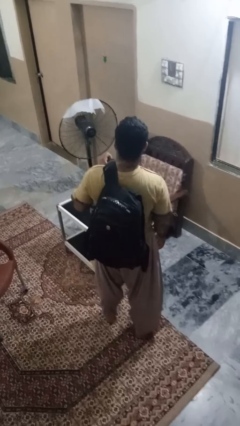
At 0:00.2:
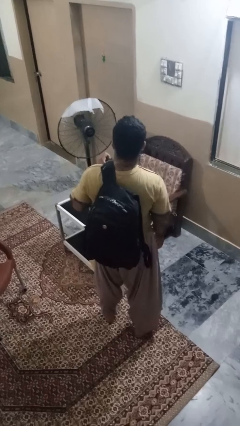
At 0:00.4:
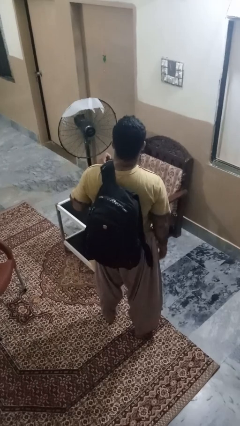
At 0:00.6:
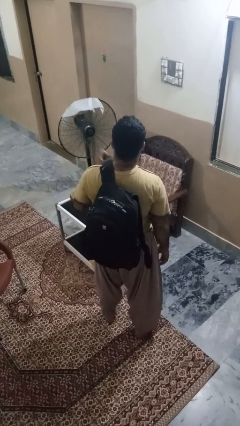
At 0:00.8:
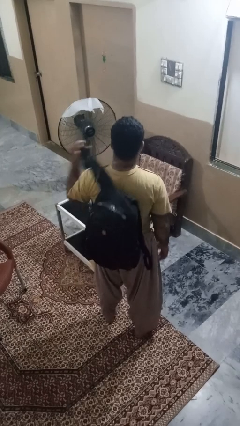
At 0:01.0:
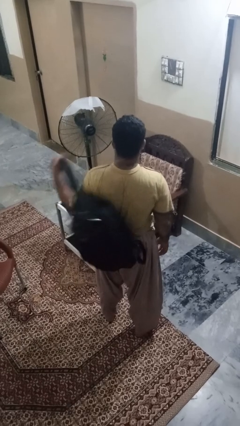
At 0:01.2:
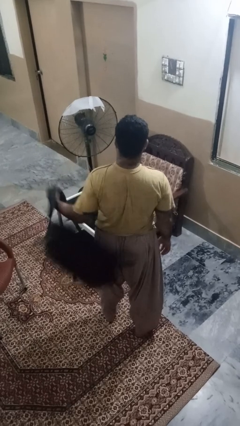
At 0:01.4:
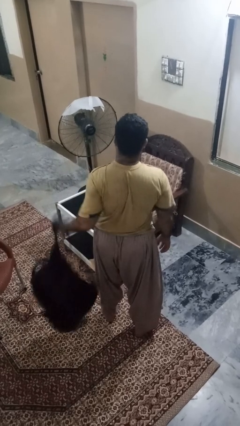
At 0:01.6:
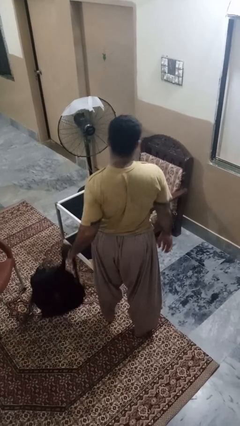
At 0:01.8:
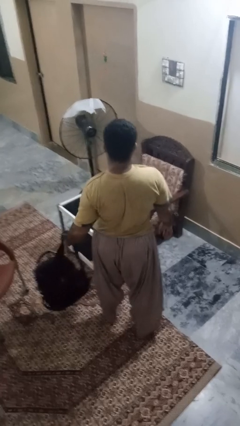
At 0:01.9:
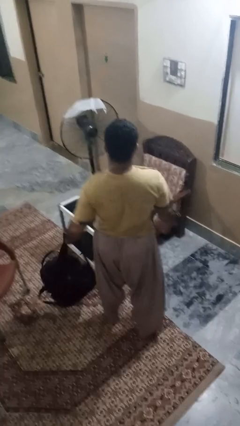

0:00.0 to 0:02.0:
person takes off backpack

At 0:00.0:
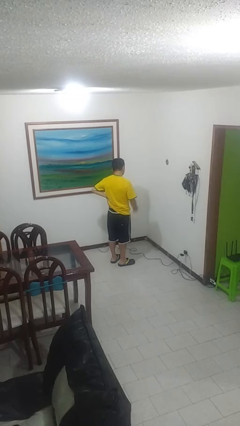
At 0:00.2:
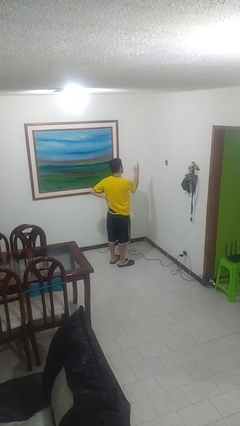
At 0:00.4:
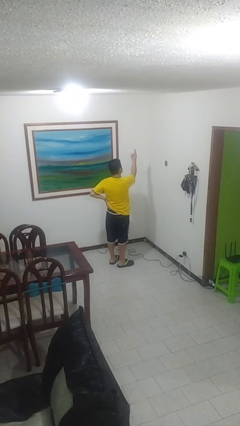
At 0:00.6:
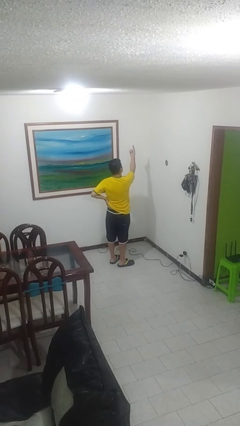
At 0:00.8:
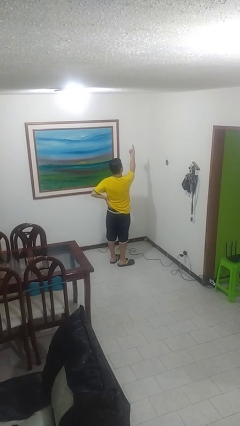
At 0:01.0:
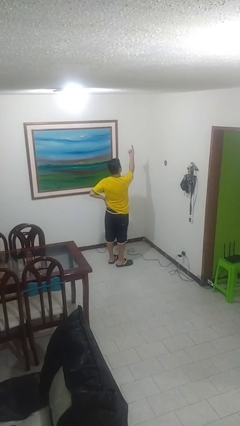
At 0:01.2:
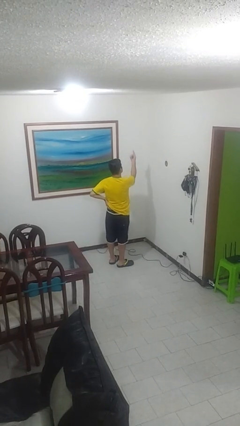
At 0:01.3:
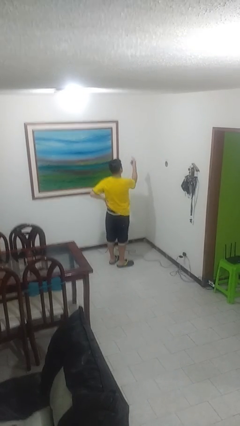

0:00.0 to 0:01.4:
person gestures number one

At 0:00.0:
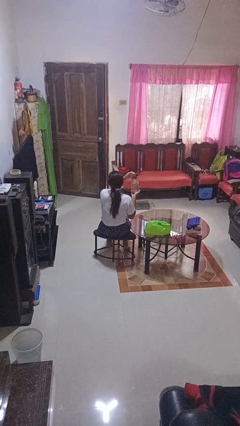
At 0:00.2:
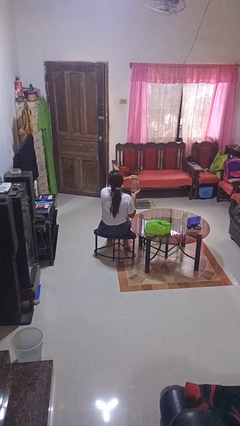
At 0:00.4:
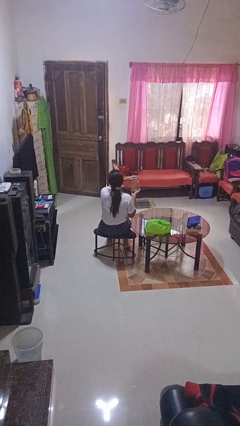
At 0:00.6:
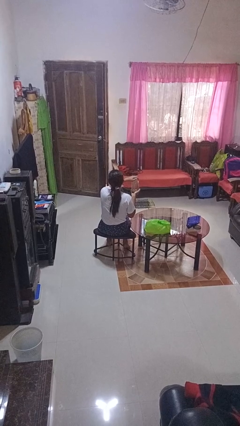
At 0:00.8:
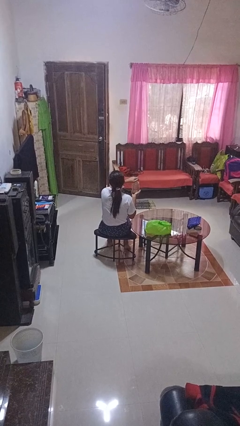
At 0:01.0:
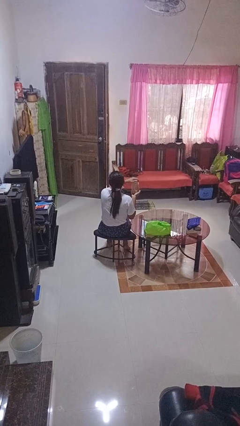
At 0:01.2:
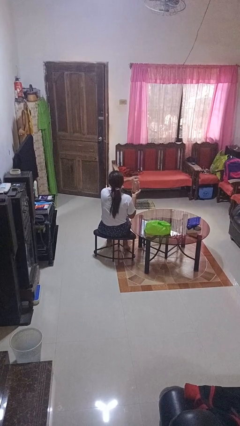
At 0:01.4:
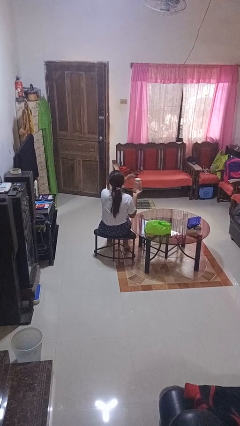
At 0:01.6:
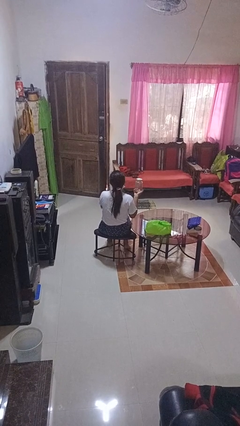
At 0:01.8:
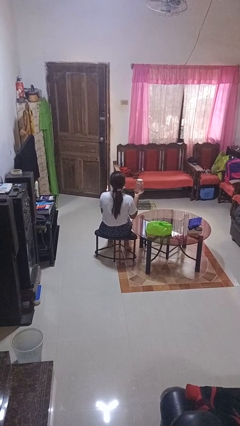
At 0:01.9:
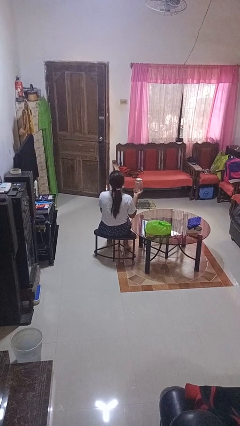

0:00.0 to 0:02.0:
person closes jar

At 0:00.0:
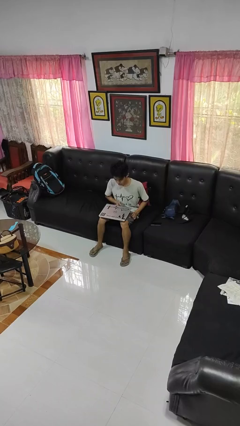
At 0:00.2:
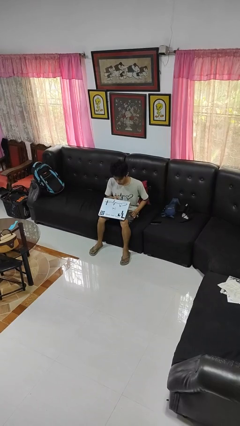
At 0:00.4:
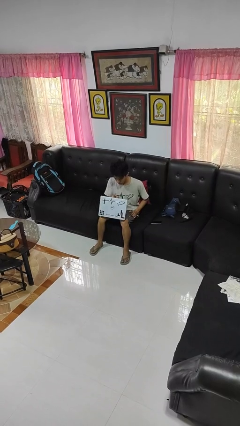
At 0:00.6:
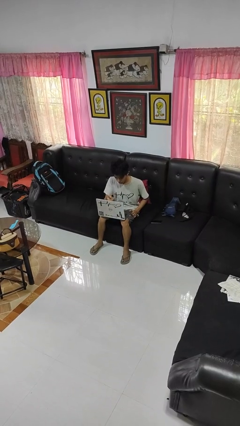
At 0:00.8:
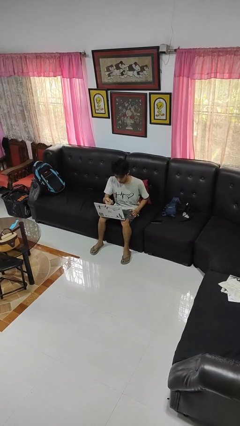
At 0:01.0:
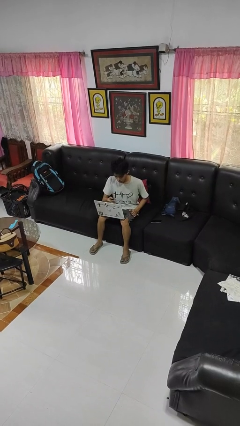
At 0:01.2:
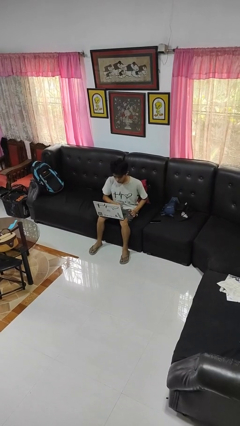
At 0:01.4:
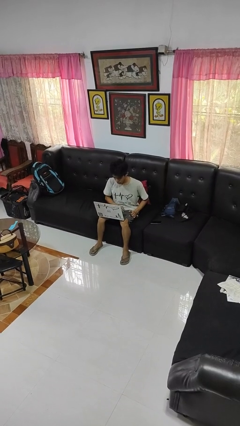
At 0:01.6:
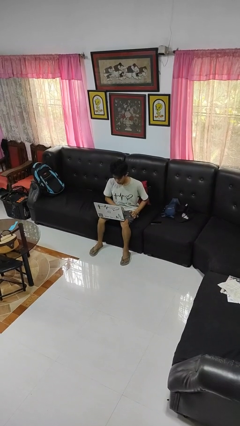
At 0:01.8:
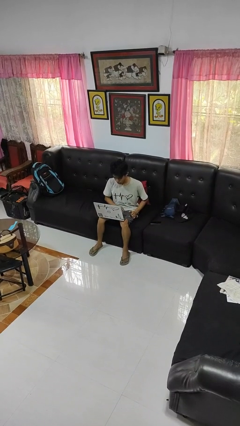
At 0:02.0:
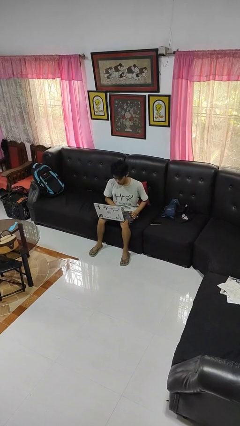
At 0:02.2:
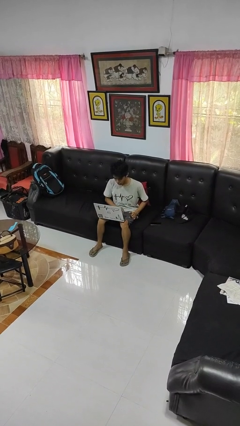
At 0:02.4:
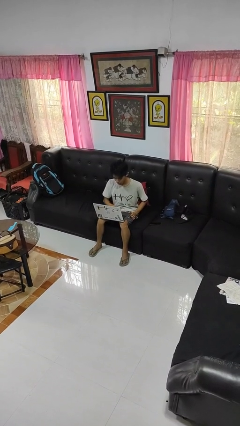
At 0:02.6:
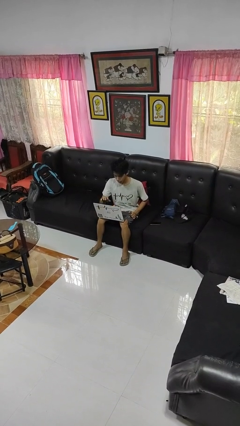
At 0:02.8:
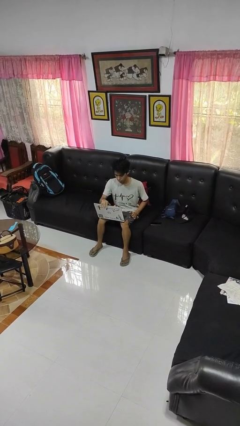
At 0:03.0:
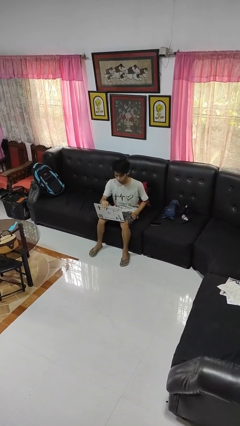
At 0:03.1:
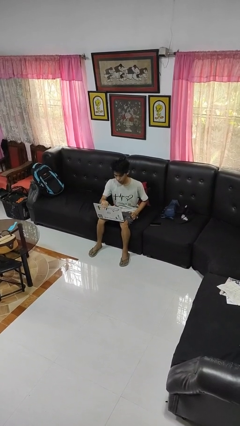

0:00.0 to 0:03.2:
person opens laptop

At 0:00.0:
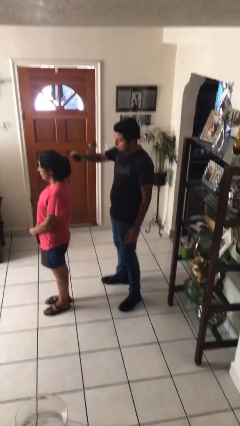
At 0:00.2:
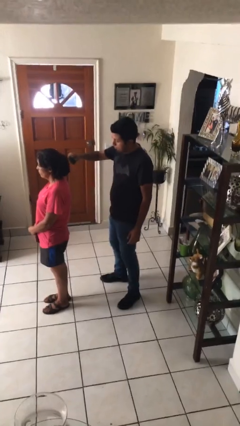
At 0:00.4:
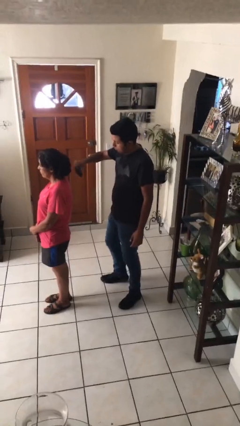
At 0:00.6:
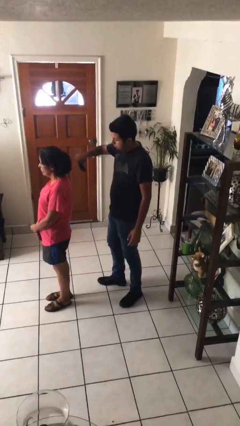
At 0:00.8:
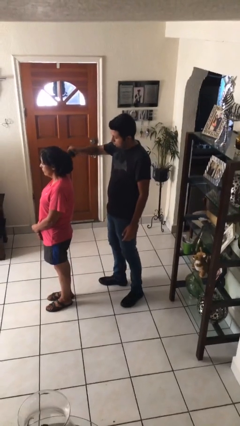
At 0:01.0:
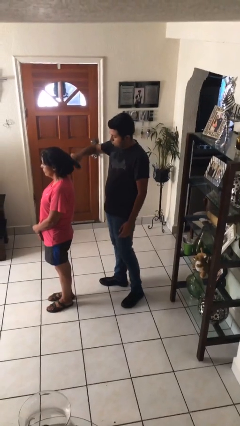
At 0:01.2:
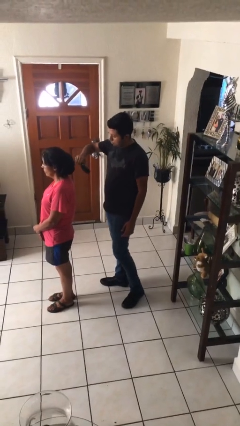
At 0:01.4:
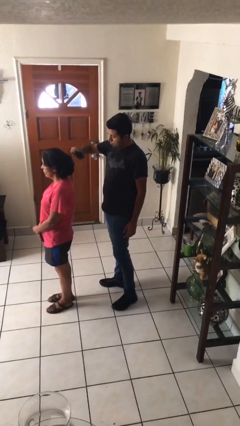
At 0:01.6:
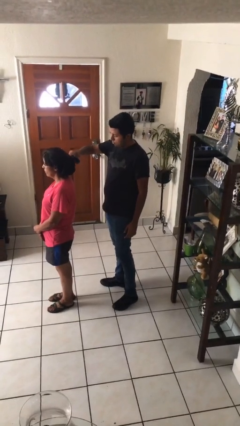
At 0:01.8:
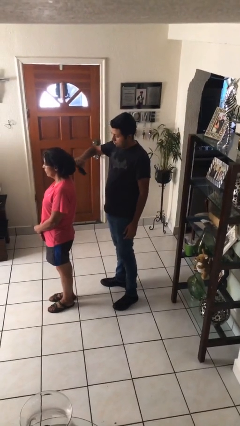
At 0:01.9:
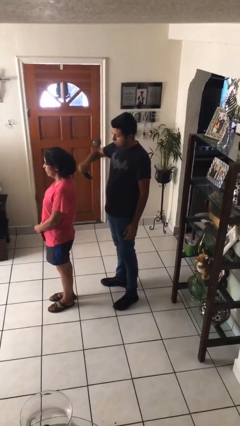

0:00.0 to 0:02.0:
person brushes hair of person

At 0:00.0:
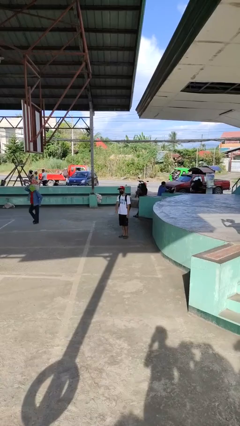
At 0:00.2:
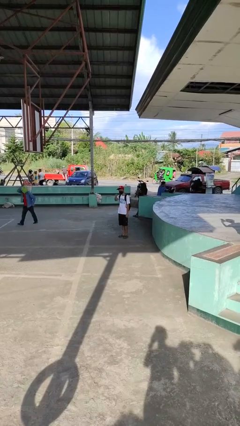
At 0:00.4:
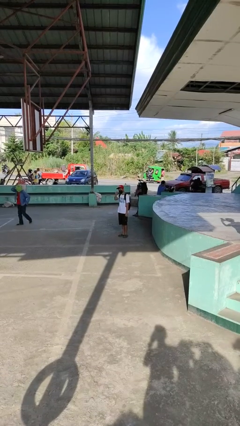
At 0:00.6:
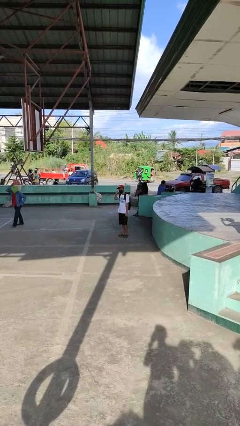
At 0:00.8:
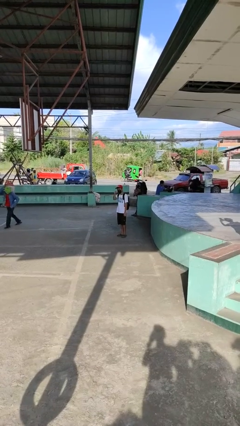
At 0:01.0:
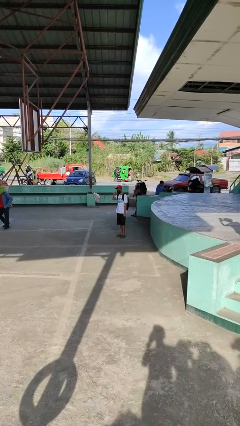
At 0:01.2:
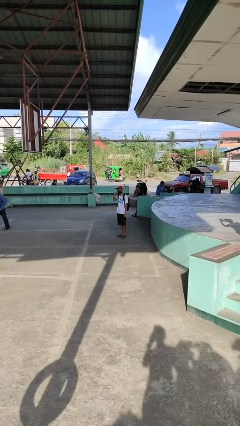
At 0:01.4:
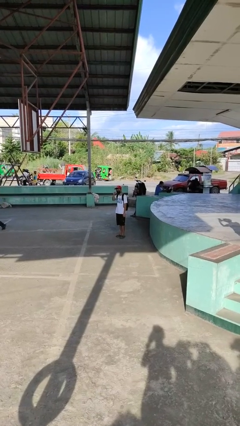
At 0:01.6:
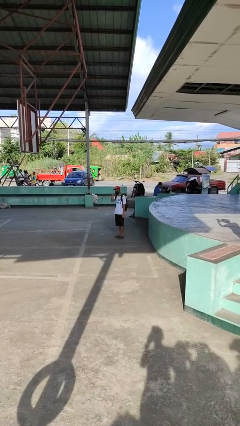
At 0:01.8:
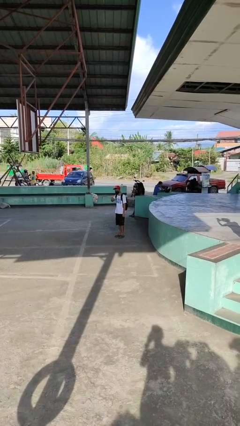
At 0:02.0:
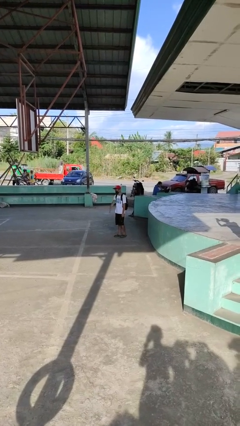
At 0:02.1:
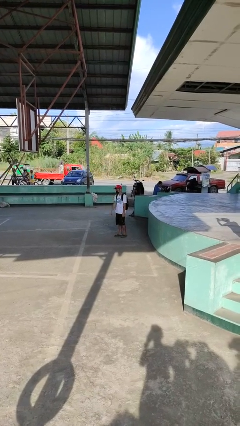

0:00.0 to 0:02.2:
person points at person

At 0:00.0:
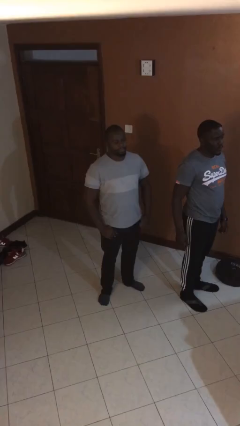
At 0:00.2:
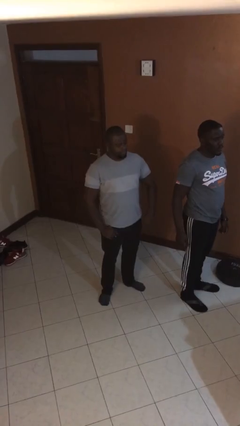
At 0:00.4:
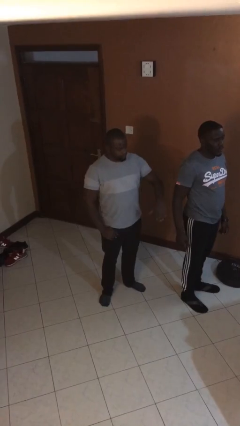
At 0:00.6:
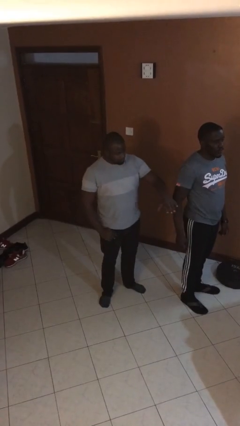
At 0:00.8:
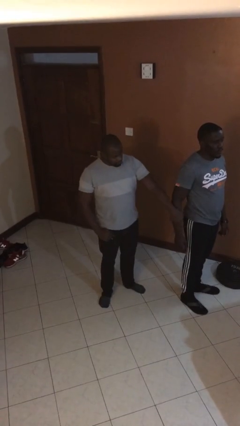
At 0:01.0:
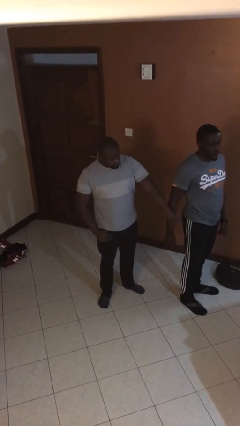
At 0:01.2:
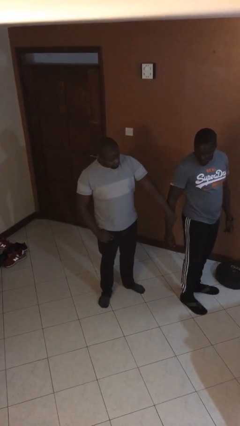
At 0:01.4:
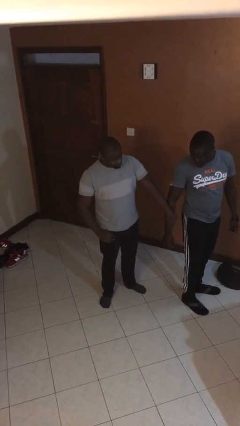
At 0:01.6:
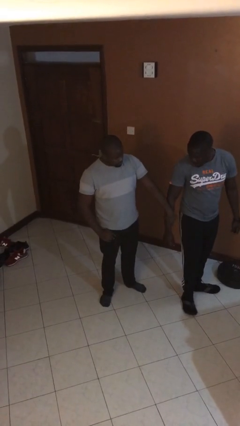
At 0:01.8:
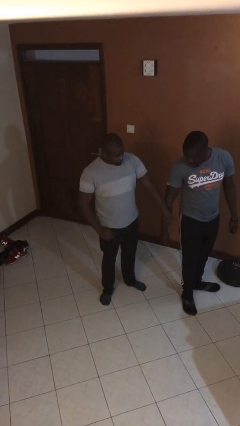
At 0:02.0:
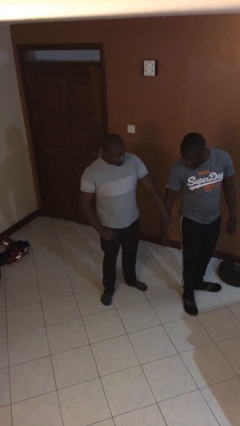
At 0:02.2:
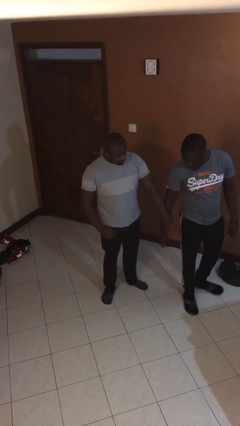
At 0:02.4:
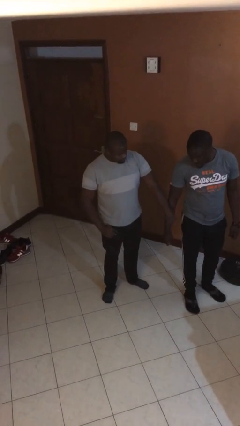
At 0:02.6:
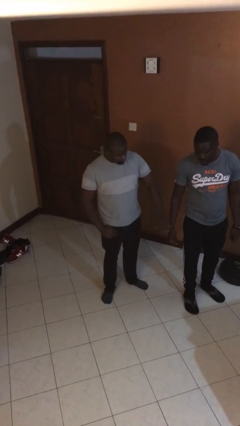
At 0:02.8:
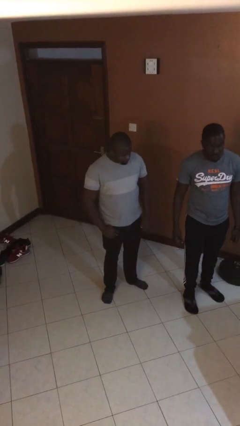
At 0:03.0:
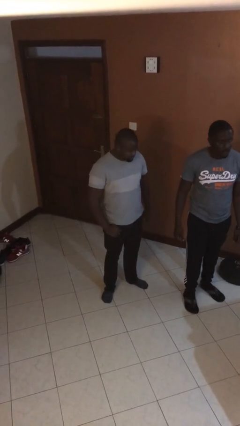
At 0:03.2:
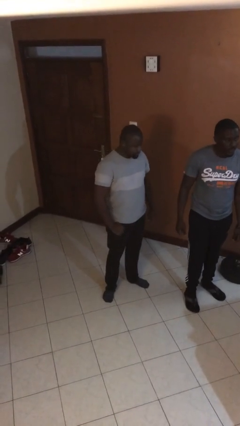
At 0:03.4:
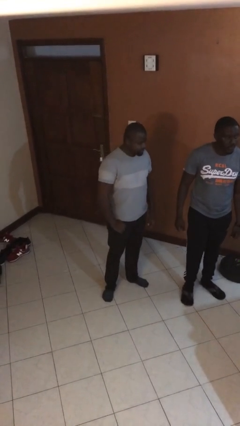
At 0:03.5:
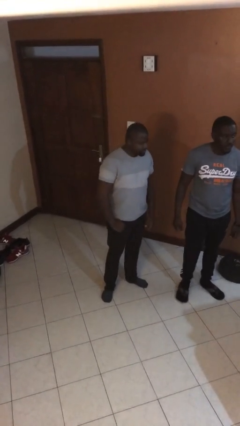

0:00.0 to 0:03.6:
person grabs person by forearm
